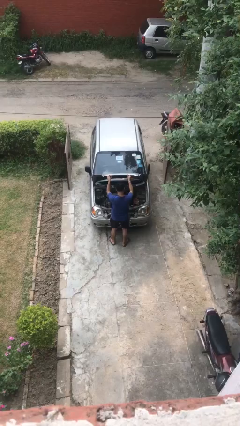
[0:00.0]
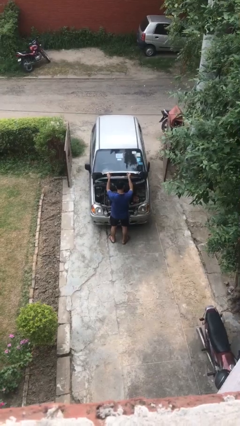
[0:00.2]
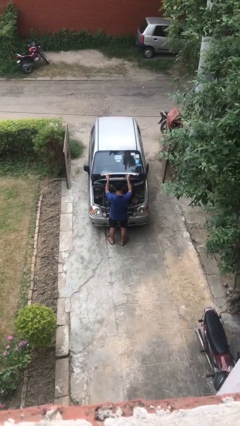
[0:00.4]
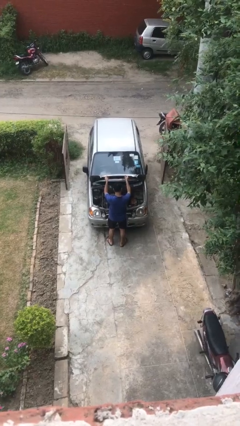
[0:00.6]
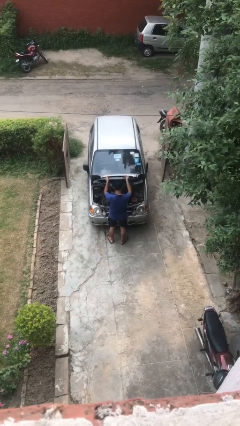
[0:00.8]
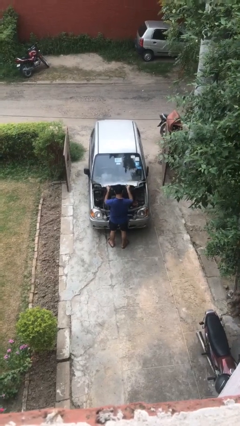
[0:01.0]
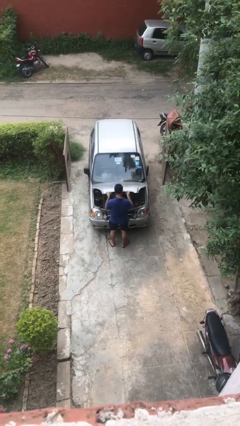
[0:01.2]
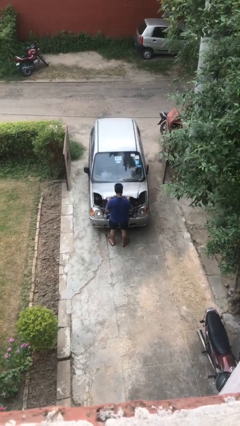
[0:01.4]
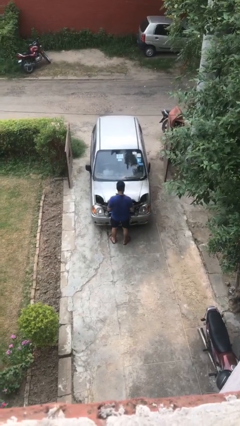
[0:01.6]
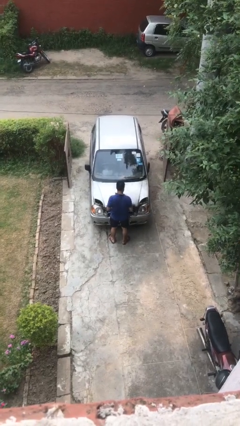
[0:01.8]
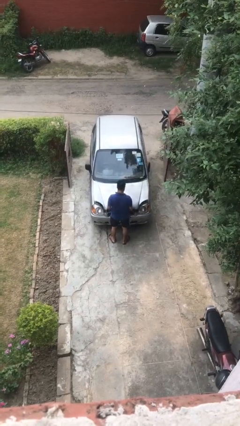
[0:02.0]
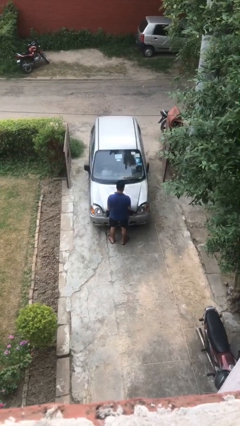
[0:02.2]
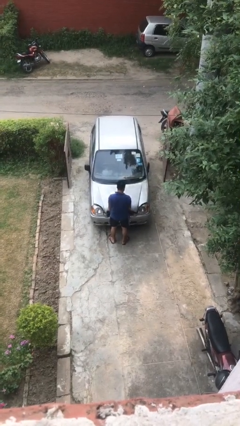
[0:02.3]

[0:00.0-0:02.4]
person closes car hood

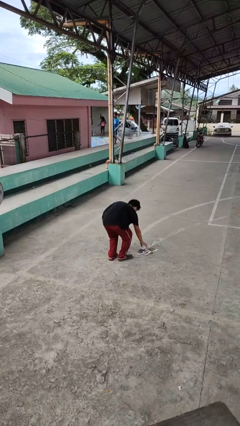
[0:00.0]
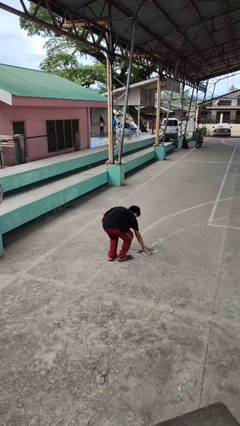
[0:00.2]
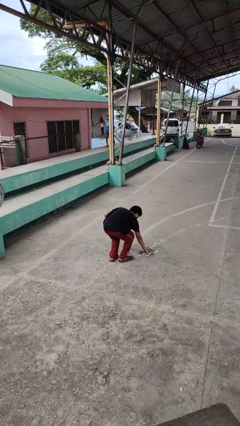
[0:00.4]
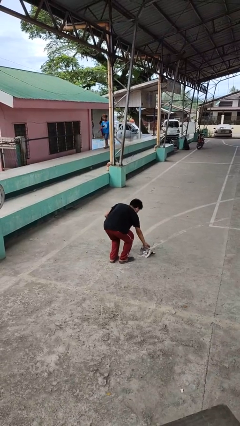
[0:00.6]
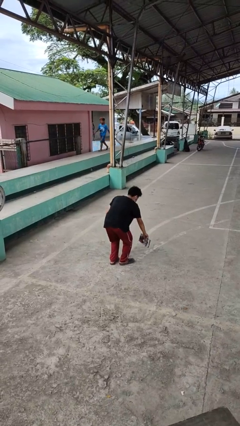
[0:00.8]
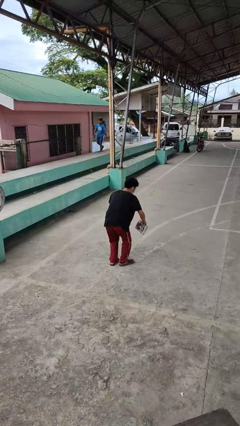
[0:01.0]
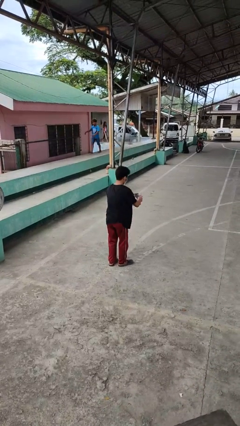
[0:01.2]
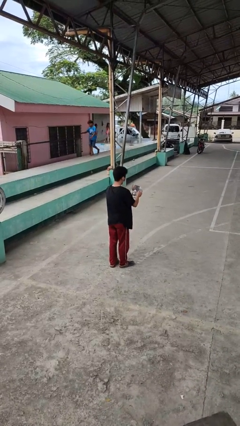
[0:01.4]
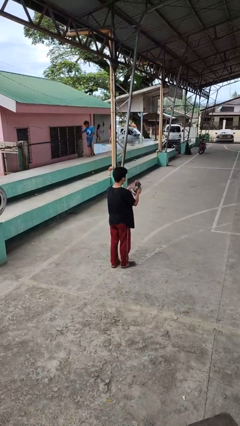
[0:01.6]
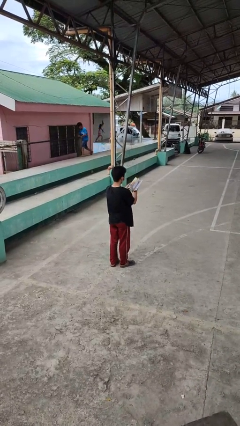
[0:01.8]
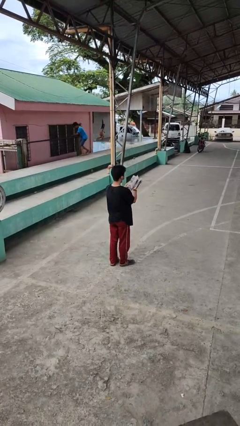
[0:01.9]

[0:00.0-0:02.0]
person picks up object from floor

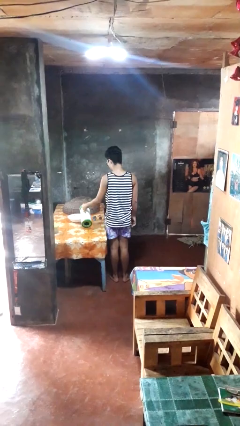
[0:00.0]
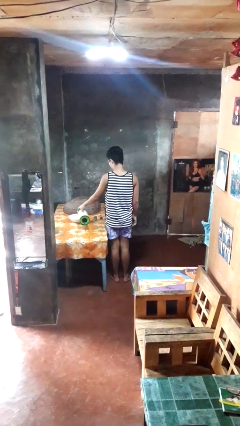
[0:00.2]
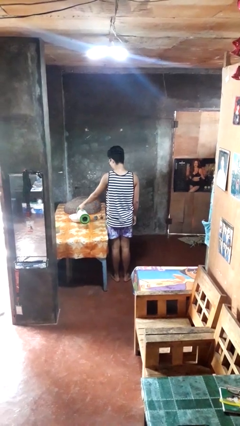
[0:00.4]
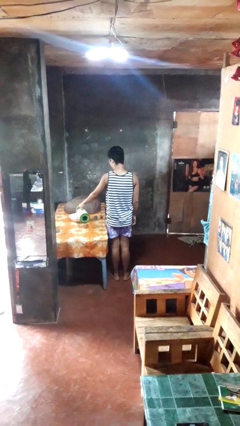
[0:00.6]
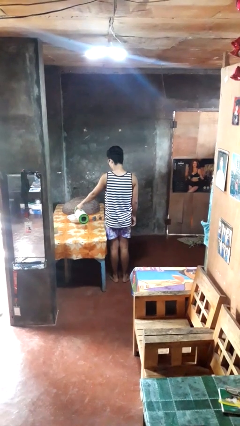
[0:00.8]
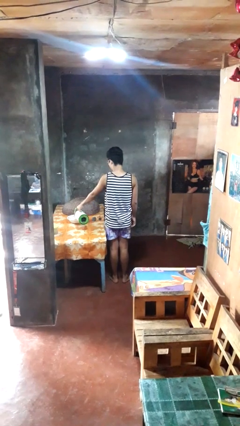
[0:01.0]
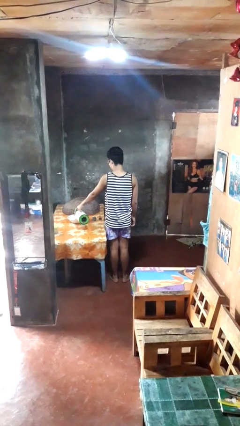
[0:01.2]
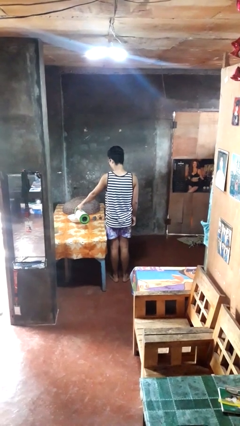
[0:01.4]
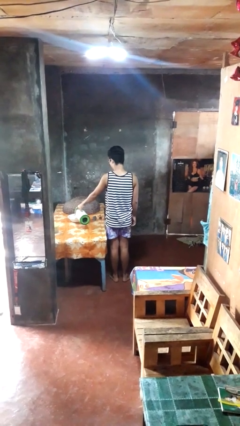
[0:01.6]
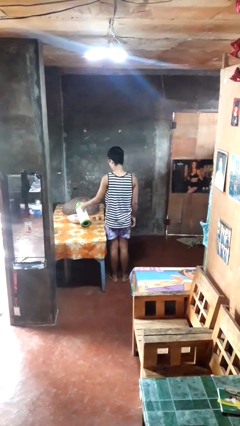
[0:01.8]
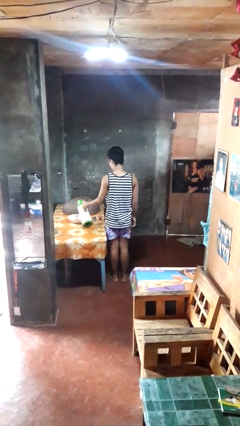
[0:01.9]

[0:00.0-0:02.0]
person pours into bowl

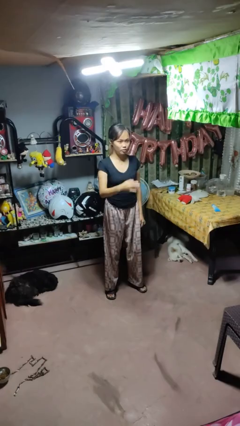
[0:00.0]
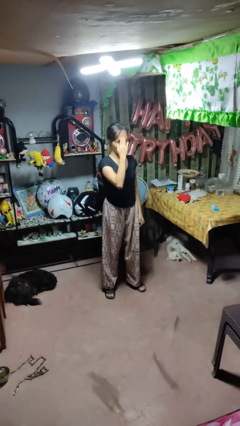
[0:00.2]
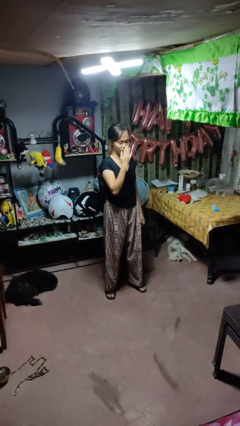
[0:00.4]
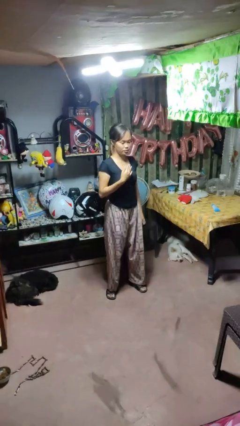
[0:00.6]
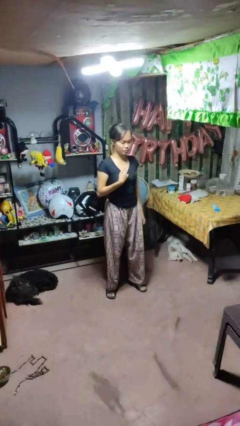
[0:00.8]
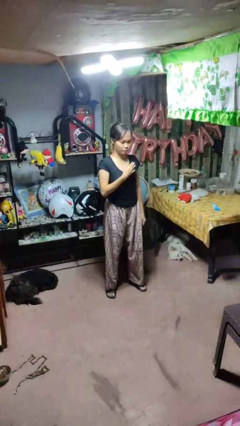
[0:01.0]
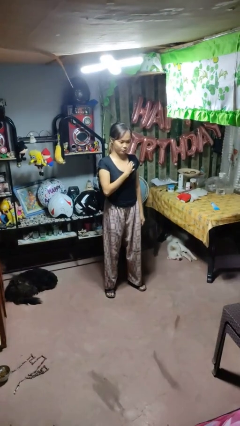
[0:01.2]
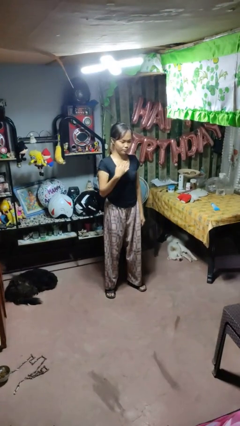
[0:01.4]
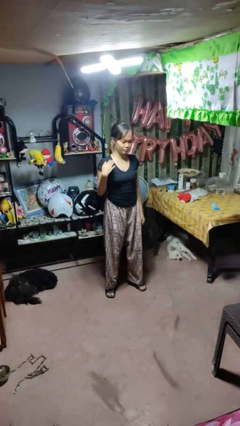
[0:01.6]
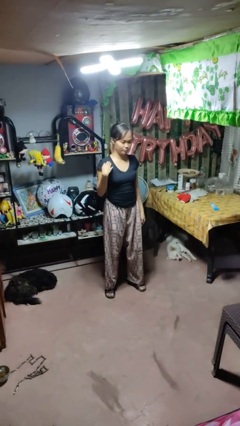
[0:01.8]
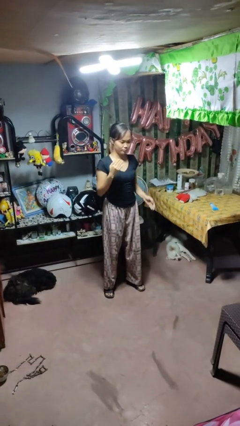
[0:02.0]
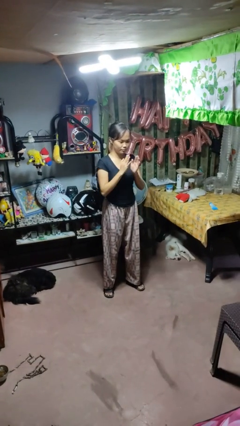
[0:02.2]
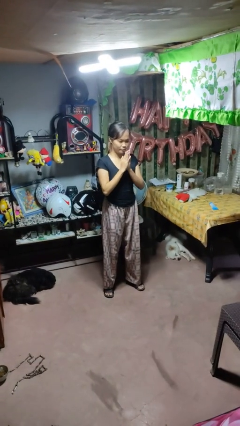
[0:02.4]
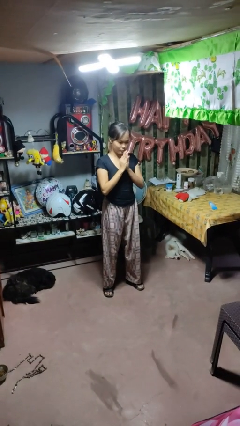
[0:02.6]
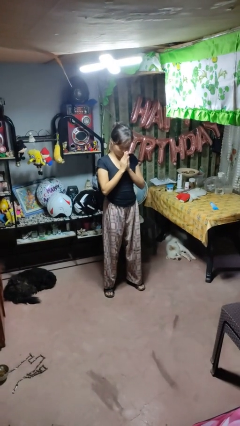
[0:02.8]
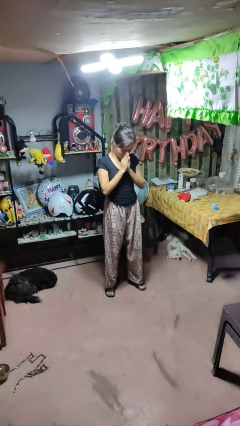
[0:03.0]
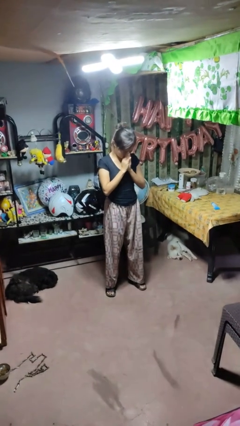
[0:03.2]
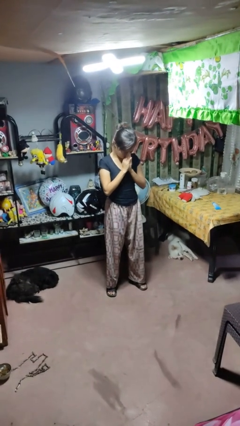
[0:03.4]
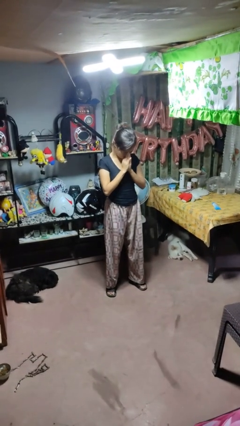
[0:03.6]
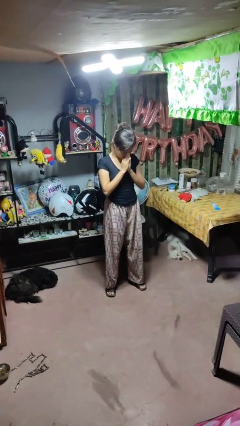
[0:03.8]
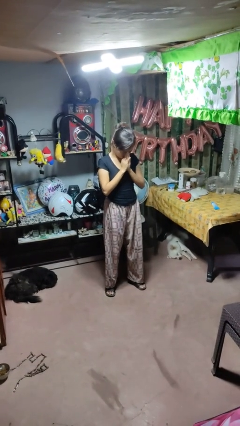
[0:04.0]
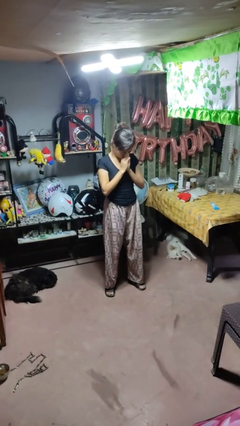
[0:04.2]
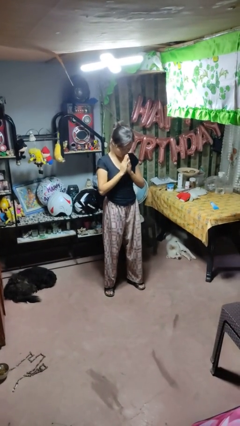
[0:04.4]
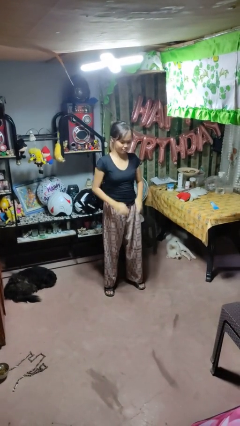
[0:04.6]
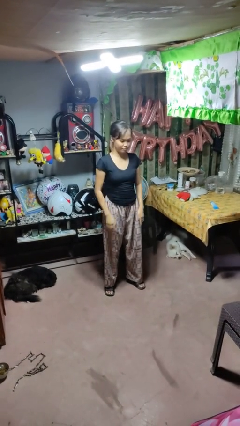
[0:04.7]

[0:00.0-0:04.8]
person prays

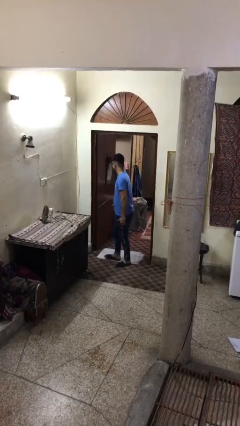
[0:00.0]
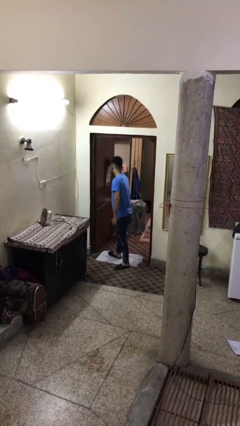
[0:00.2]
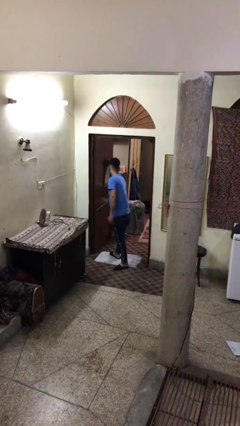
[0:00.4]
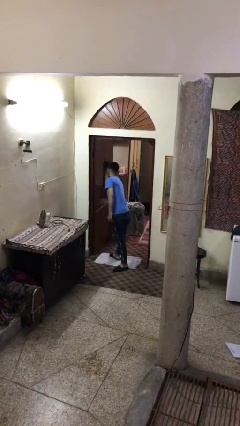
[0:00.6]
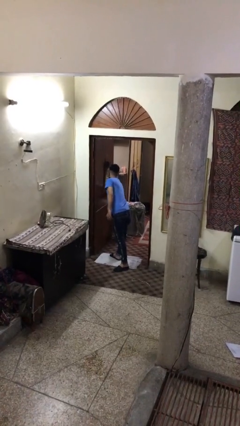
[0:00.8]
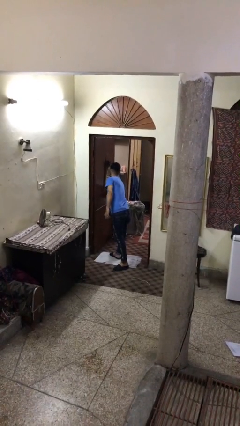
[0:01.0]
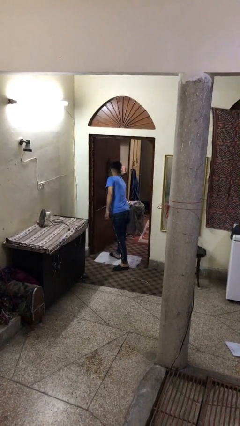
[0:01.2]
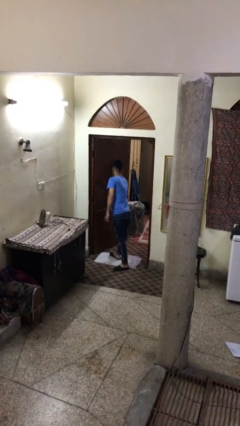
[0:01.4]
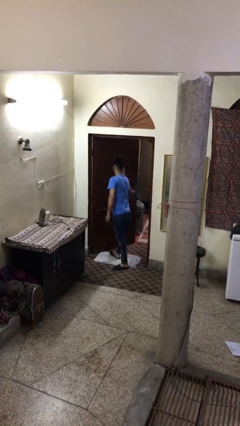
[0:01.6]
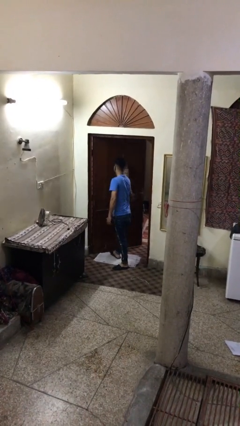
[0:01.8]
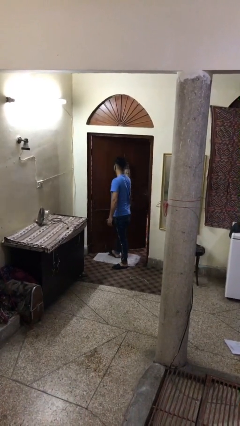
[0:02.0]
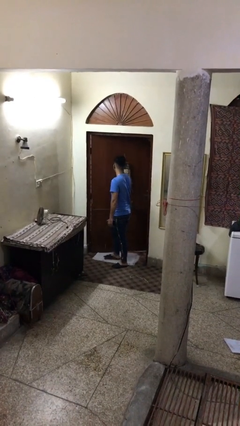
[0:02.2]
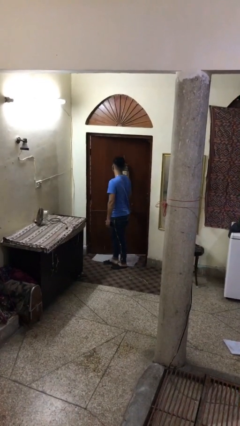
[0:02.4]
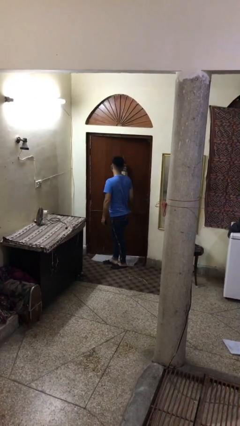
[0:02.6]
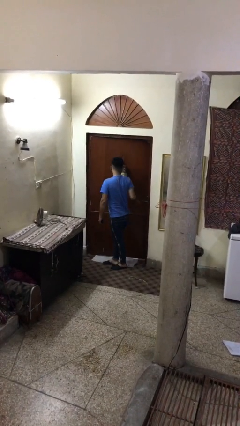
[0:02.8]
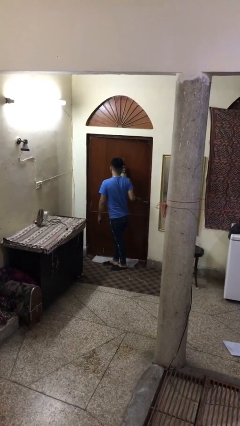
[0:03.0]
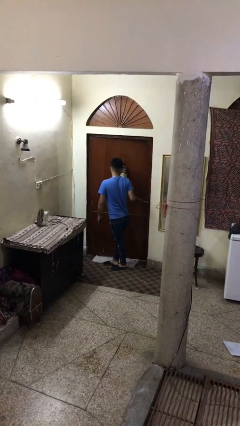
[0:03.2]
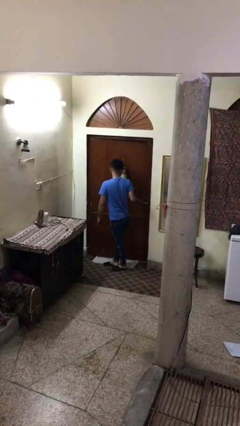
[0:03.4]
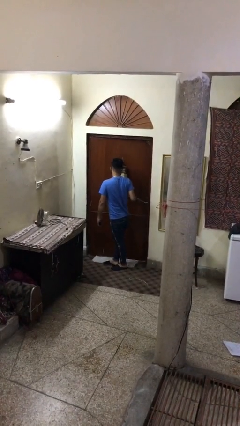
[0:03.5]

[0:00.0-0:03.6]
person closes facility door

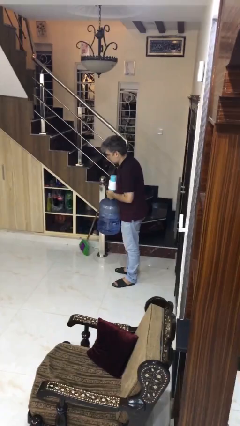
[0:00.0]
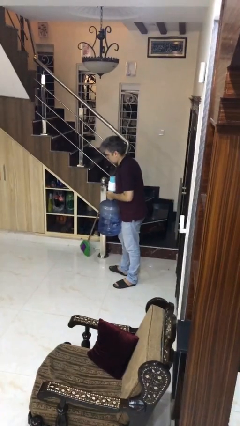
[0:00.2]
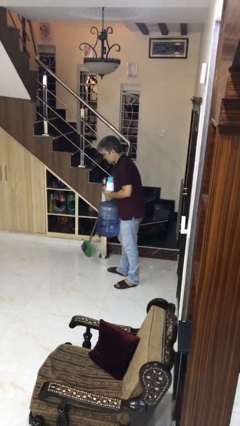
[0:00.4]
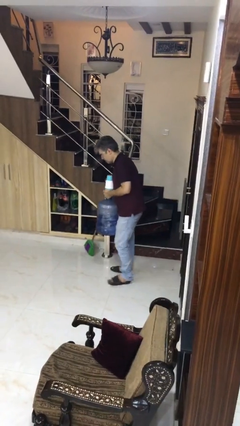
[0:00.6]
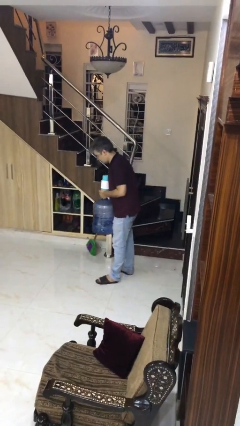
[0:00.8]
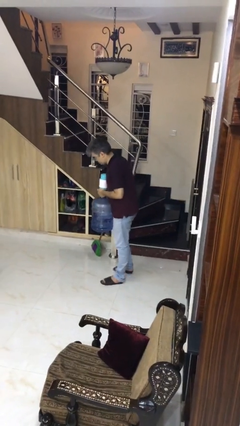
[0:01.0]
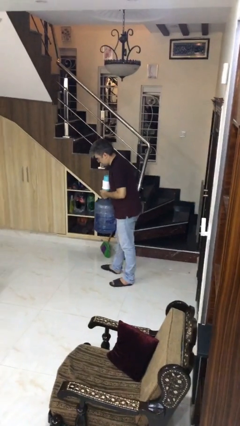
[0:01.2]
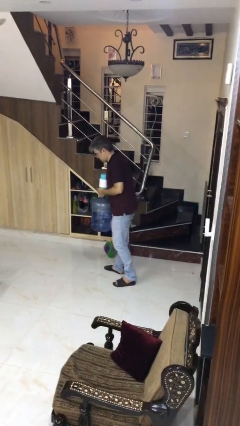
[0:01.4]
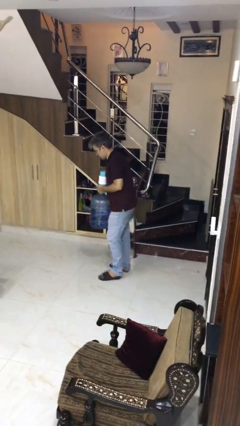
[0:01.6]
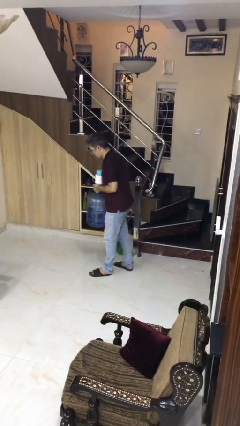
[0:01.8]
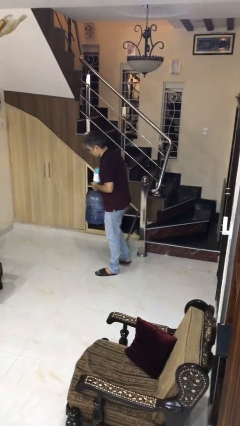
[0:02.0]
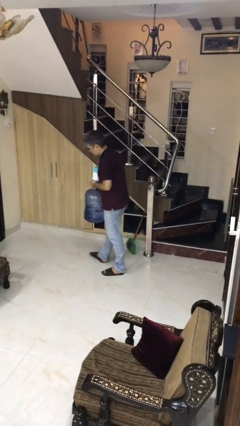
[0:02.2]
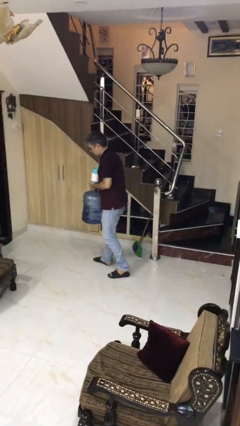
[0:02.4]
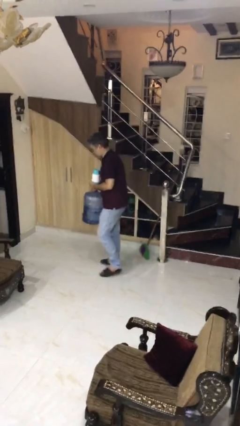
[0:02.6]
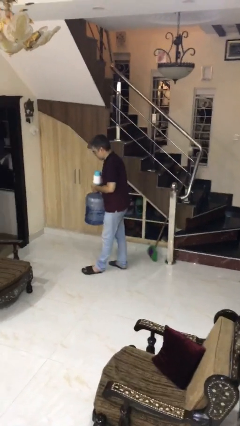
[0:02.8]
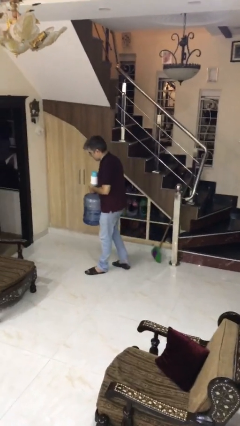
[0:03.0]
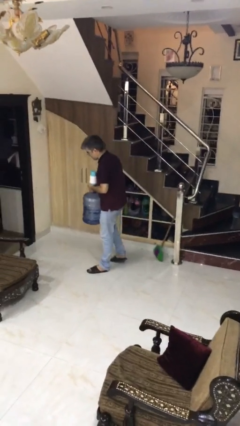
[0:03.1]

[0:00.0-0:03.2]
person carries heavy object
